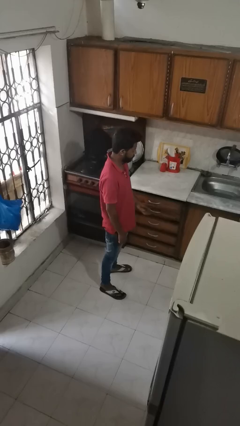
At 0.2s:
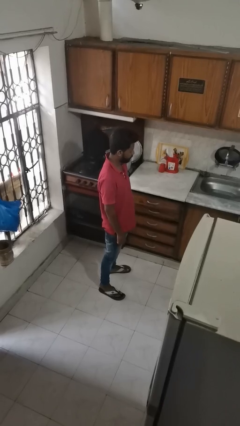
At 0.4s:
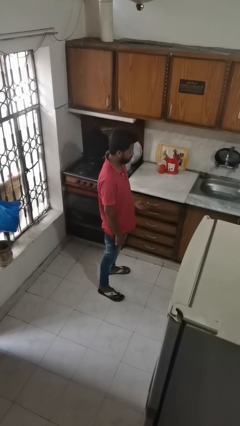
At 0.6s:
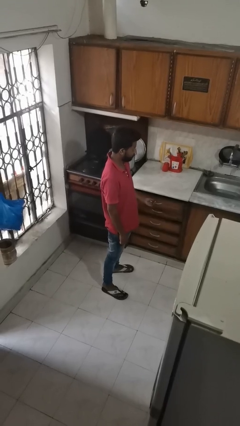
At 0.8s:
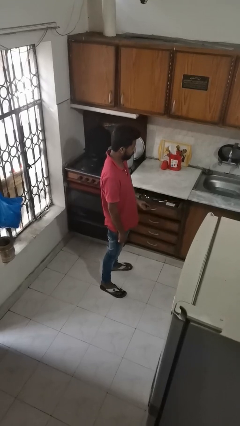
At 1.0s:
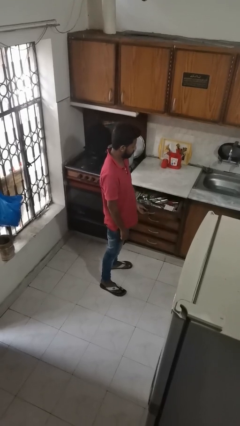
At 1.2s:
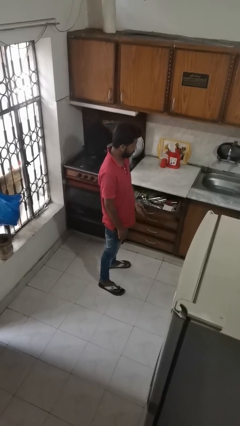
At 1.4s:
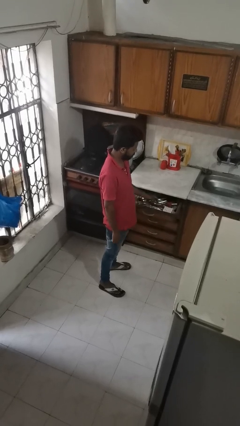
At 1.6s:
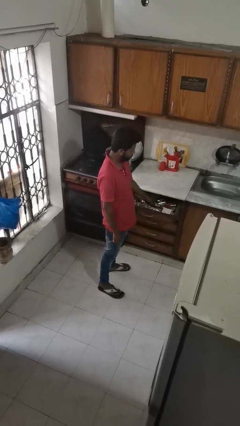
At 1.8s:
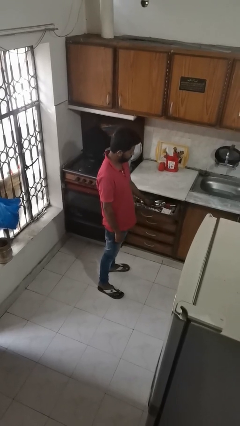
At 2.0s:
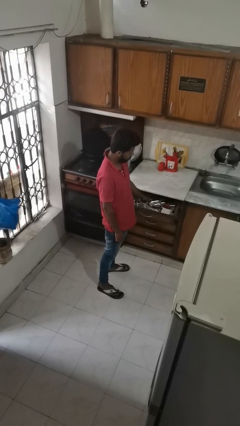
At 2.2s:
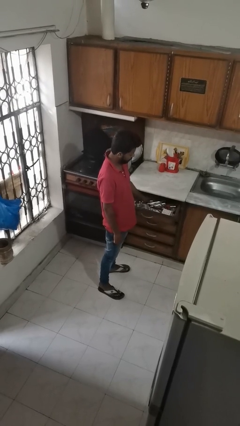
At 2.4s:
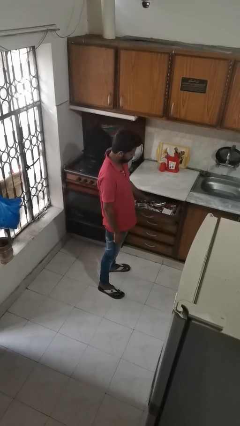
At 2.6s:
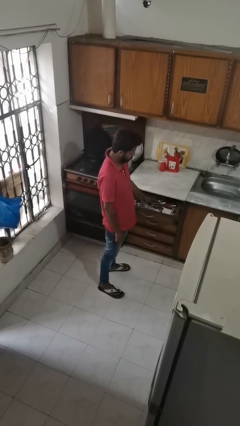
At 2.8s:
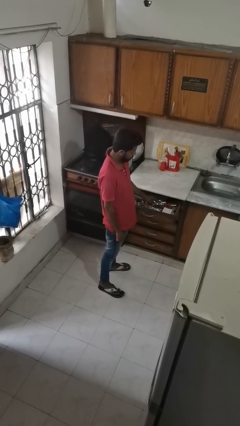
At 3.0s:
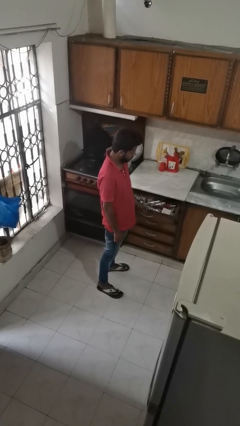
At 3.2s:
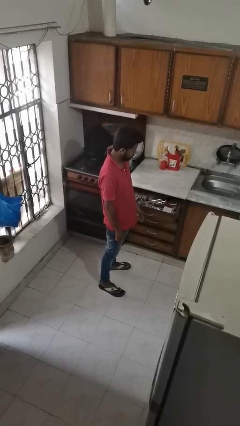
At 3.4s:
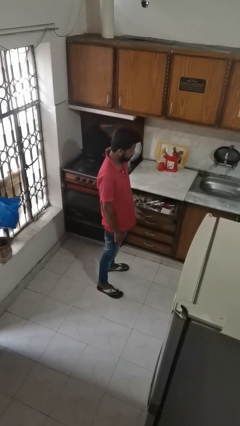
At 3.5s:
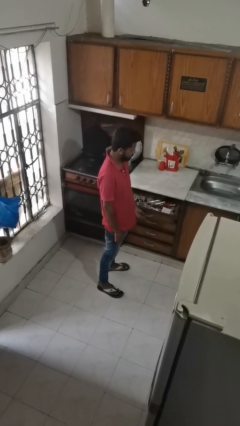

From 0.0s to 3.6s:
person searches in kitchen drawer

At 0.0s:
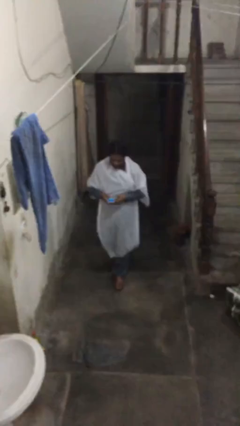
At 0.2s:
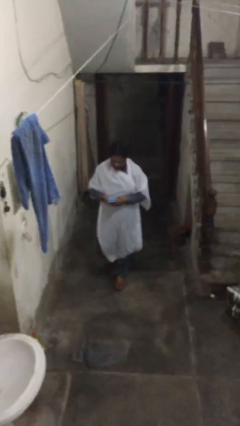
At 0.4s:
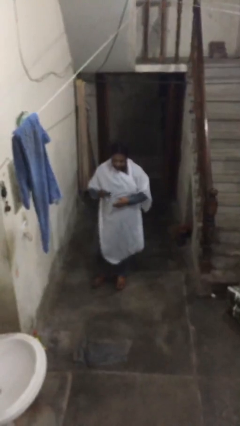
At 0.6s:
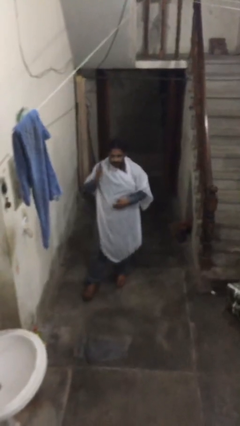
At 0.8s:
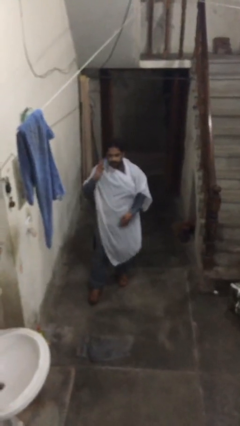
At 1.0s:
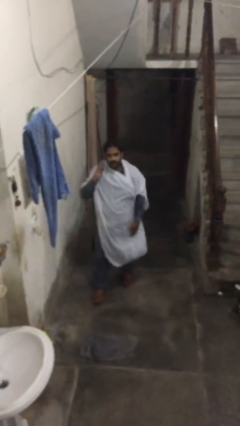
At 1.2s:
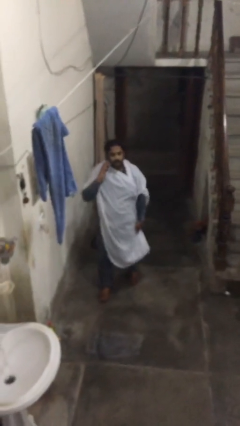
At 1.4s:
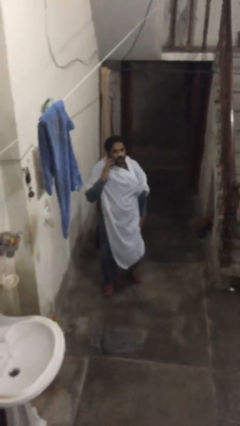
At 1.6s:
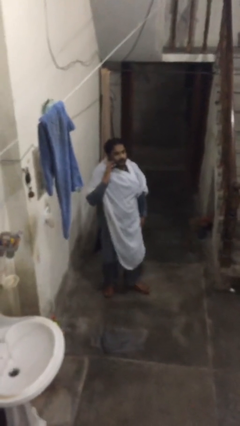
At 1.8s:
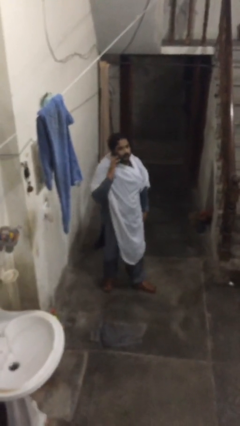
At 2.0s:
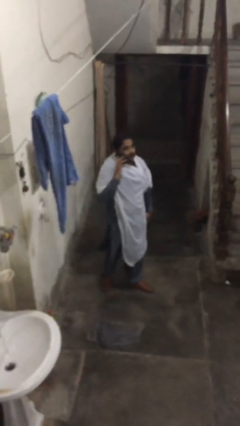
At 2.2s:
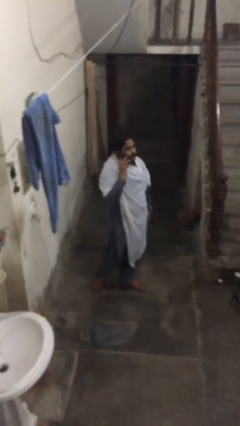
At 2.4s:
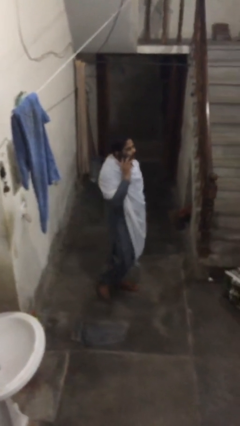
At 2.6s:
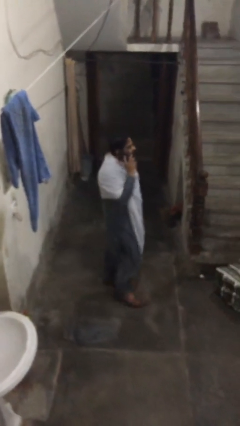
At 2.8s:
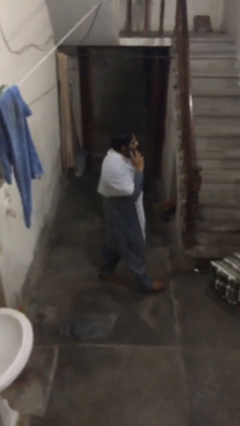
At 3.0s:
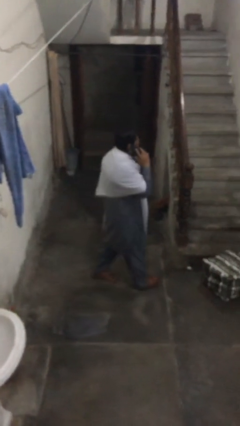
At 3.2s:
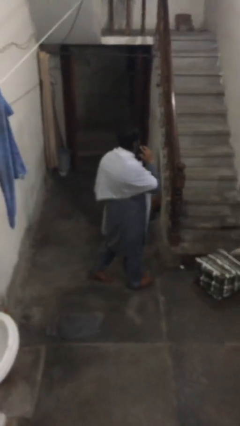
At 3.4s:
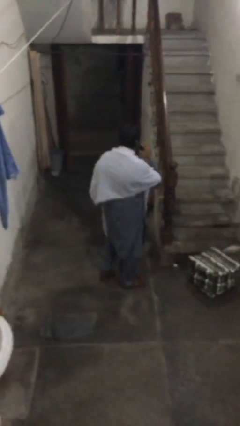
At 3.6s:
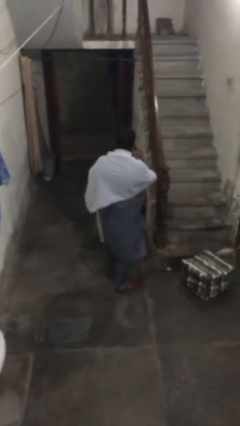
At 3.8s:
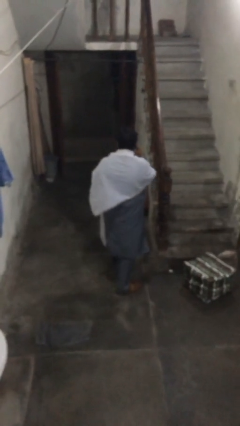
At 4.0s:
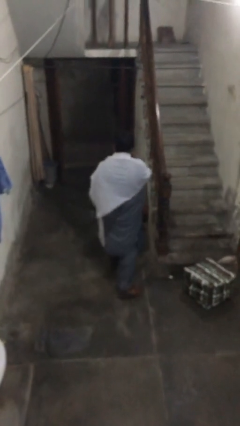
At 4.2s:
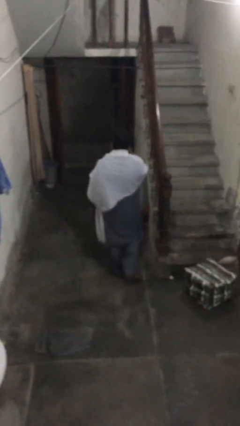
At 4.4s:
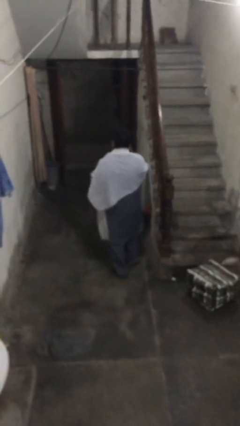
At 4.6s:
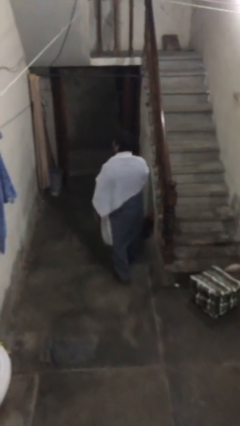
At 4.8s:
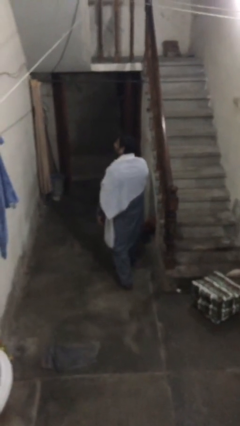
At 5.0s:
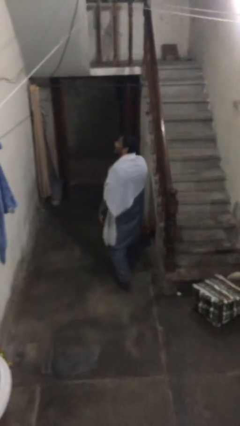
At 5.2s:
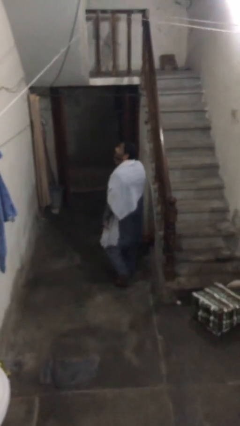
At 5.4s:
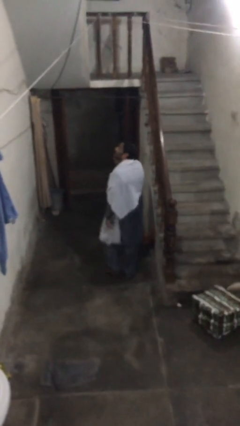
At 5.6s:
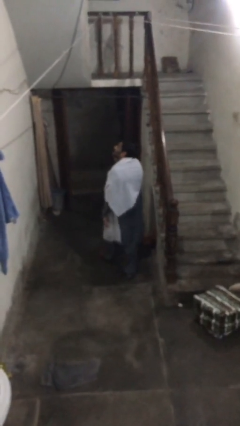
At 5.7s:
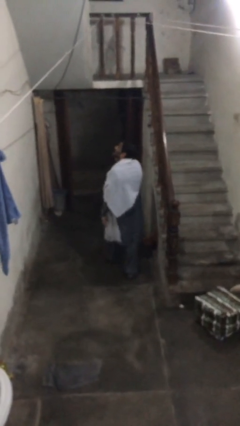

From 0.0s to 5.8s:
person talks on phone

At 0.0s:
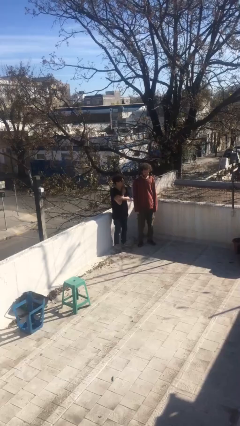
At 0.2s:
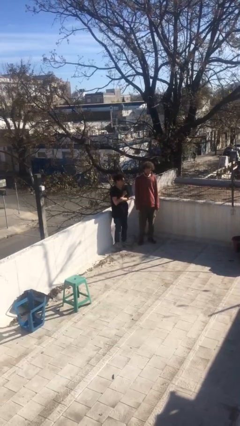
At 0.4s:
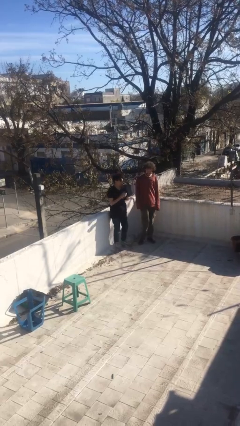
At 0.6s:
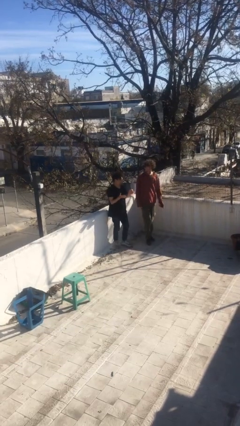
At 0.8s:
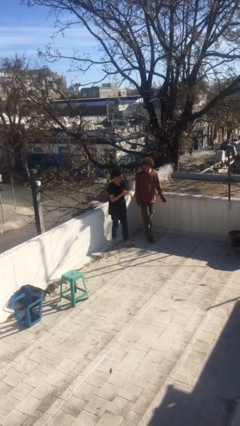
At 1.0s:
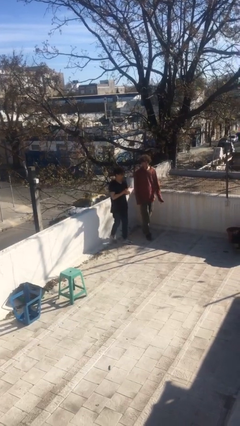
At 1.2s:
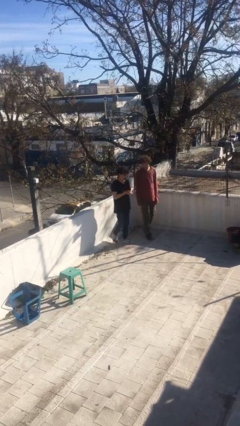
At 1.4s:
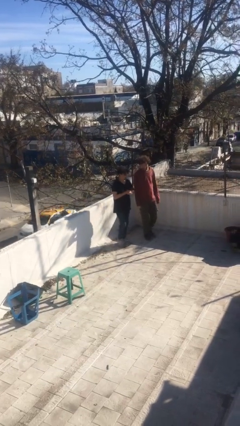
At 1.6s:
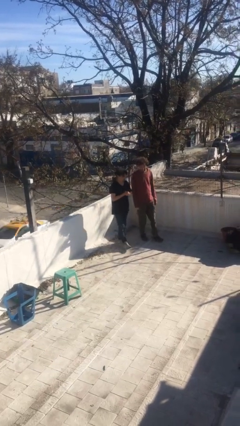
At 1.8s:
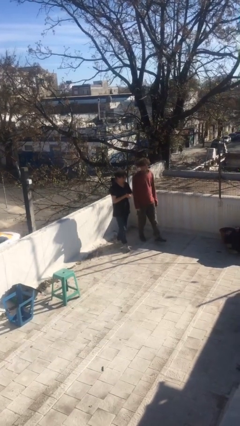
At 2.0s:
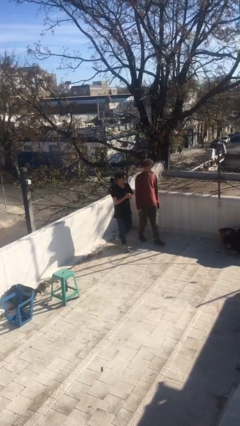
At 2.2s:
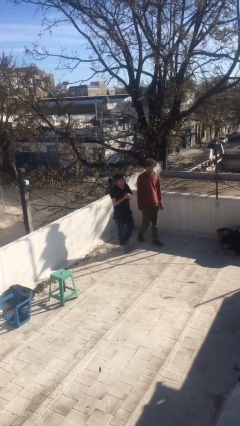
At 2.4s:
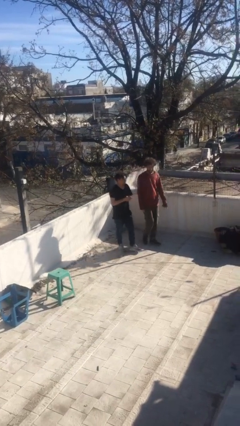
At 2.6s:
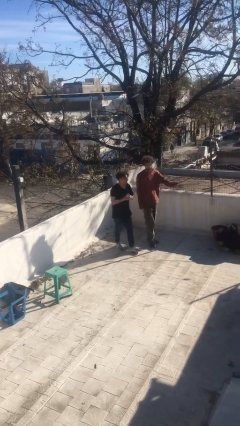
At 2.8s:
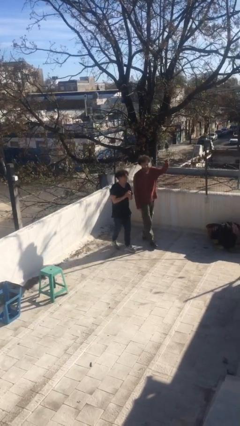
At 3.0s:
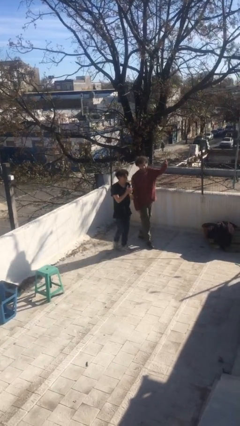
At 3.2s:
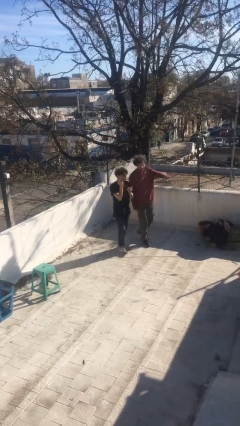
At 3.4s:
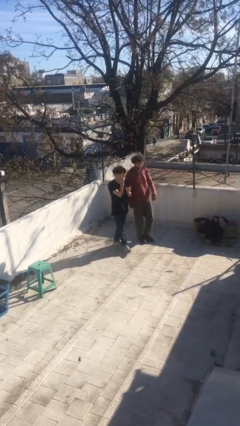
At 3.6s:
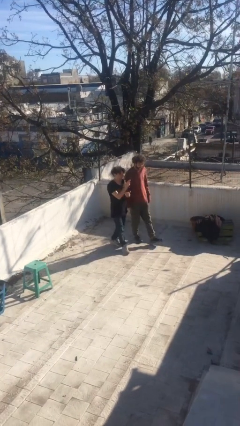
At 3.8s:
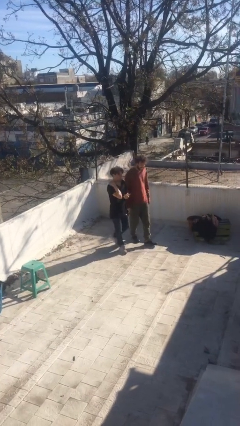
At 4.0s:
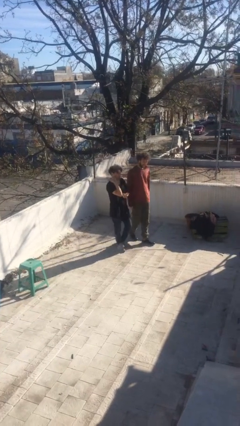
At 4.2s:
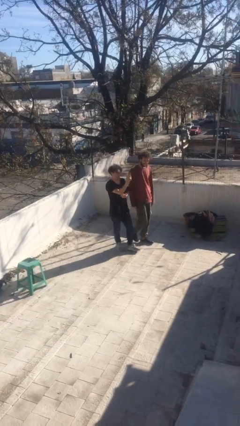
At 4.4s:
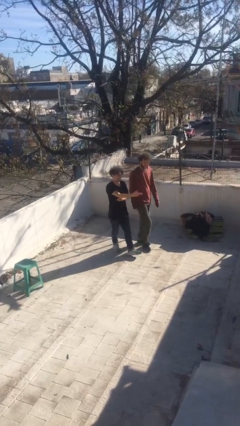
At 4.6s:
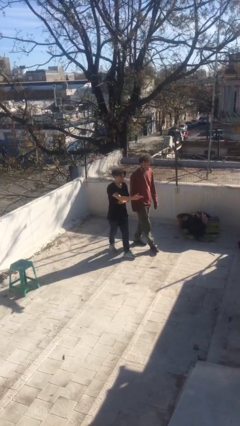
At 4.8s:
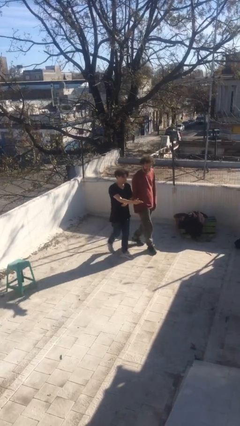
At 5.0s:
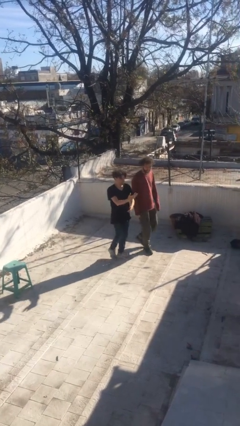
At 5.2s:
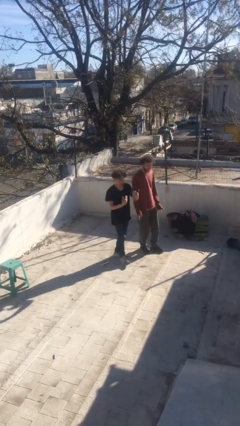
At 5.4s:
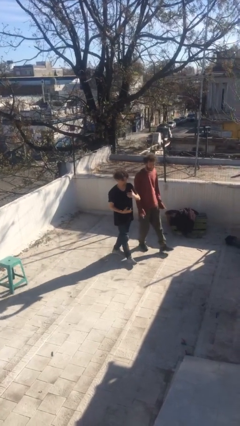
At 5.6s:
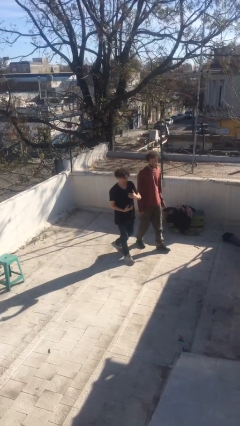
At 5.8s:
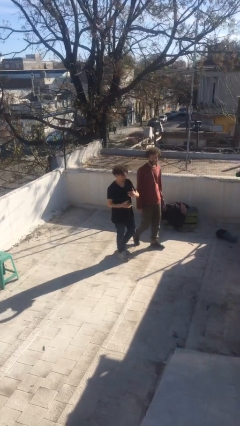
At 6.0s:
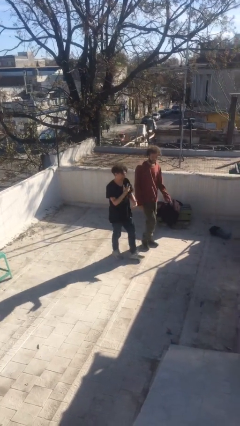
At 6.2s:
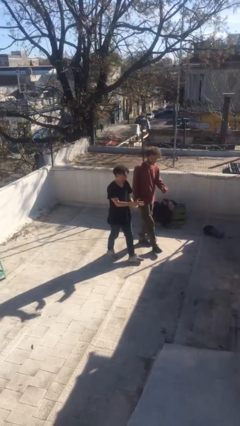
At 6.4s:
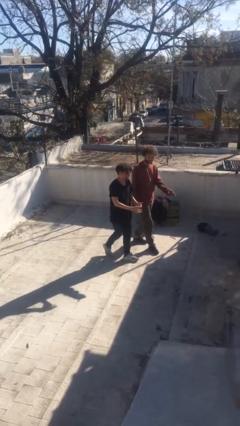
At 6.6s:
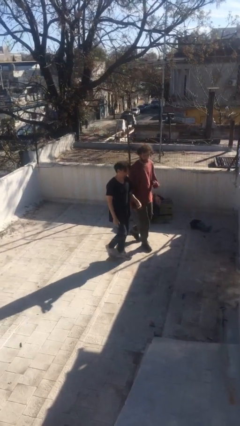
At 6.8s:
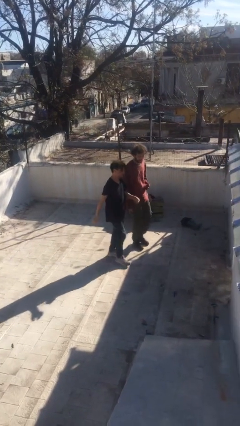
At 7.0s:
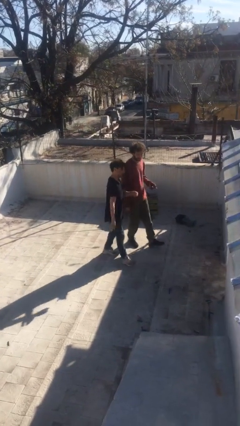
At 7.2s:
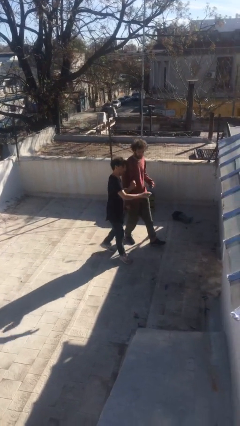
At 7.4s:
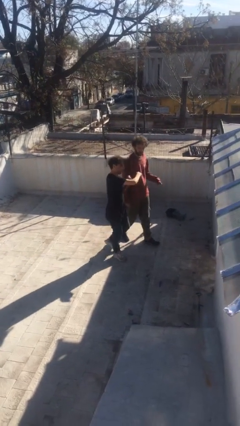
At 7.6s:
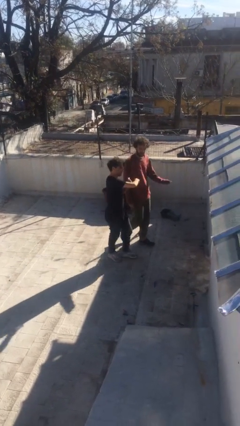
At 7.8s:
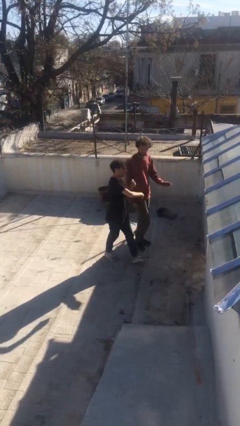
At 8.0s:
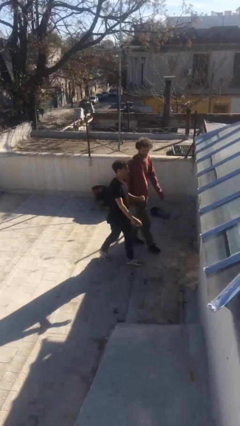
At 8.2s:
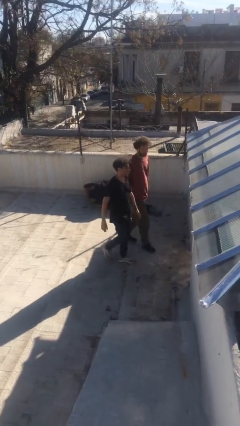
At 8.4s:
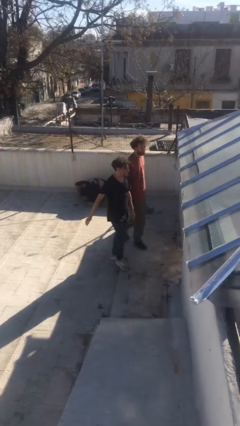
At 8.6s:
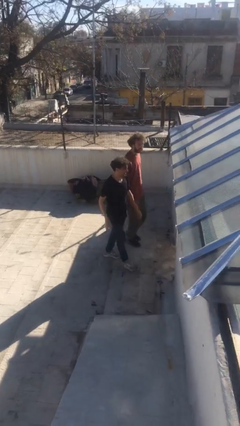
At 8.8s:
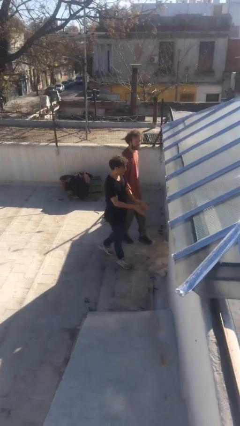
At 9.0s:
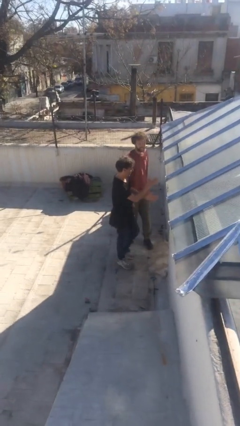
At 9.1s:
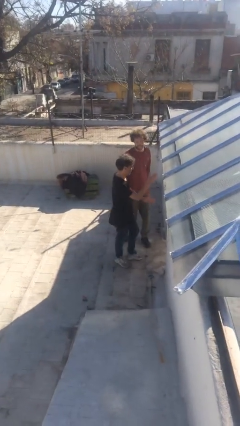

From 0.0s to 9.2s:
person talks to person
